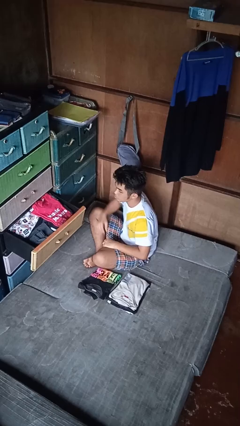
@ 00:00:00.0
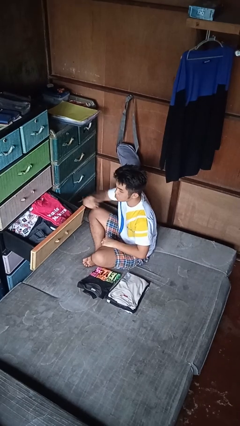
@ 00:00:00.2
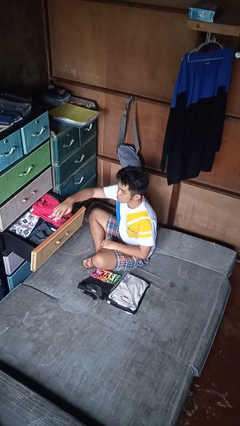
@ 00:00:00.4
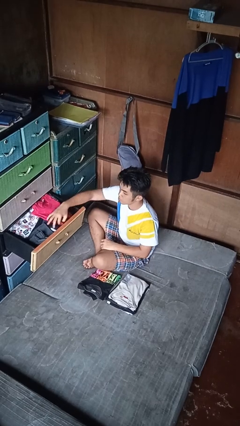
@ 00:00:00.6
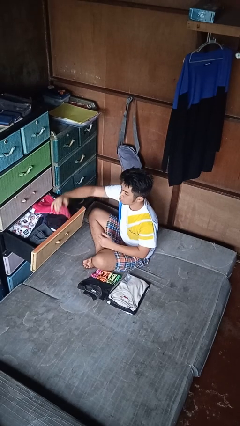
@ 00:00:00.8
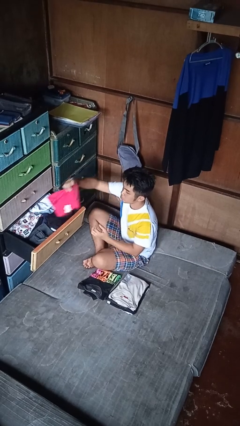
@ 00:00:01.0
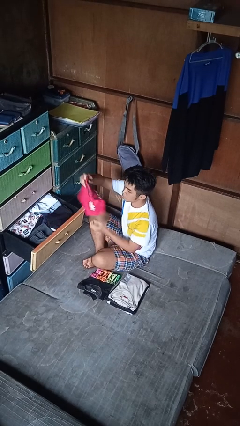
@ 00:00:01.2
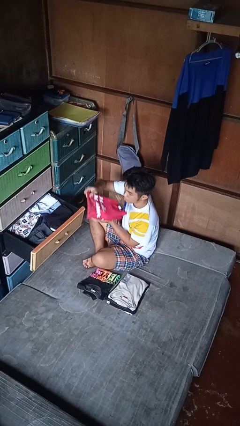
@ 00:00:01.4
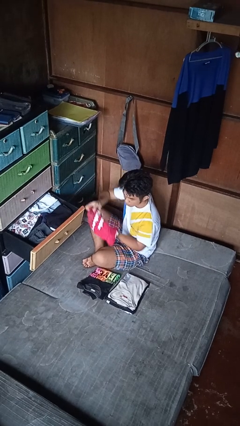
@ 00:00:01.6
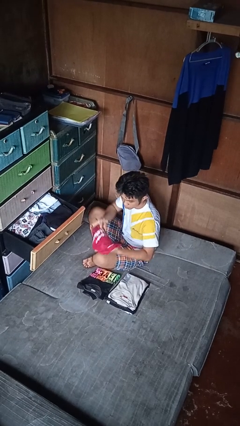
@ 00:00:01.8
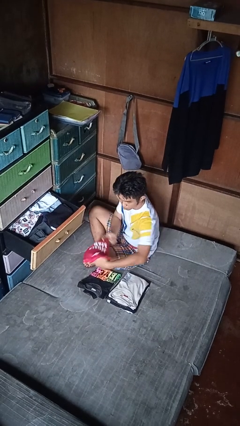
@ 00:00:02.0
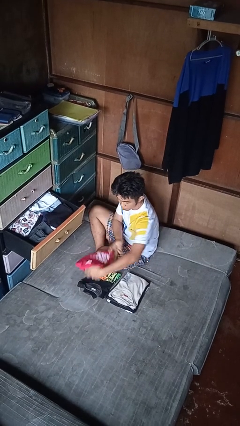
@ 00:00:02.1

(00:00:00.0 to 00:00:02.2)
person takes clothes from dresser

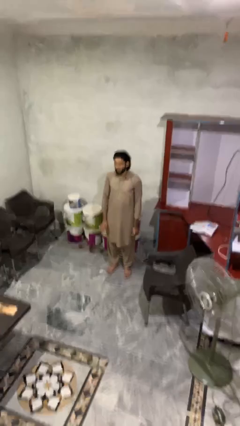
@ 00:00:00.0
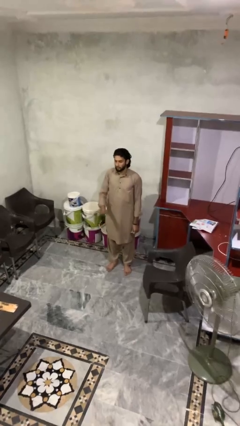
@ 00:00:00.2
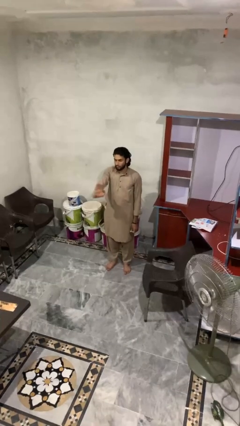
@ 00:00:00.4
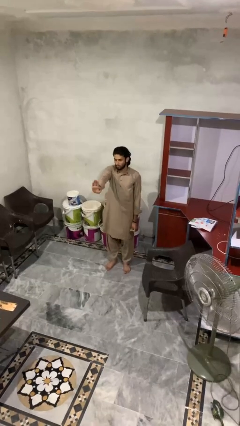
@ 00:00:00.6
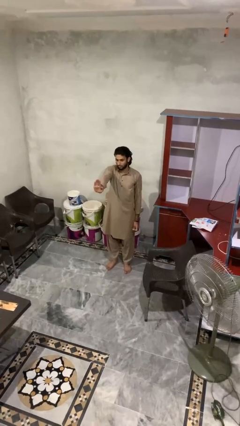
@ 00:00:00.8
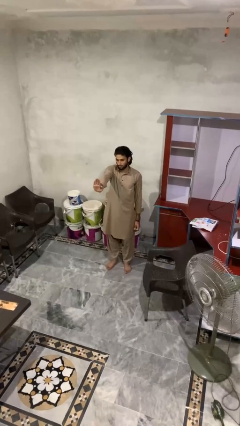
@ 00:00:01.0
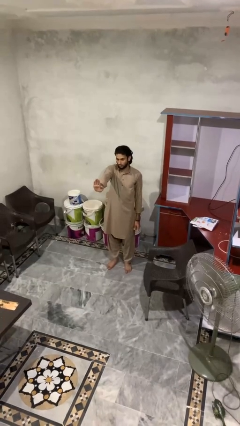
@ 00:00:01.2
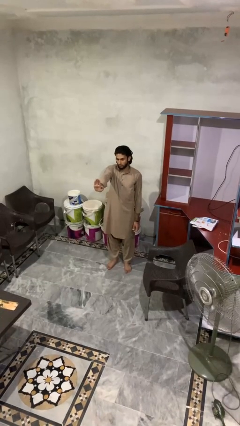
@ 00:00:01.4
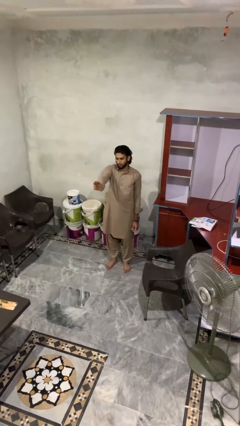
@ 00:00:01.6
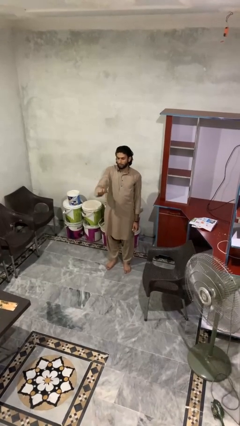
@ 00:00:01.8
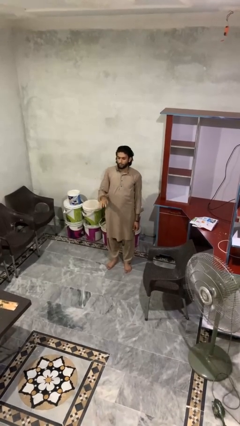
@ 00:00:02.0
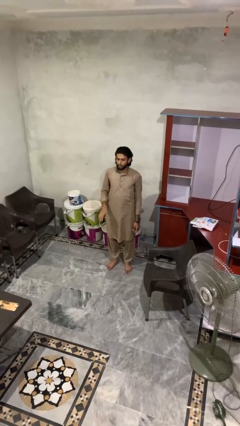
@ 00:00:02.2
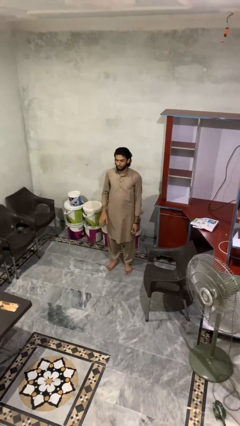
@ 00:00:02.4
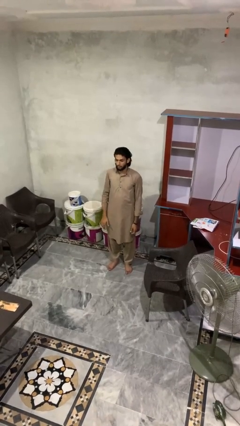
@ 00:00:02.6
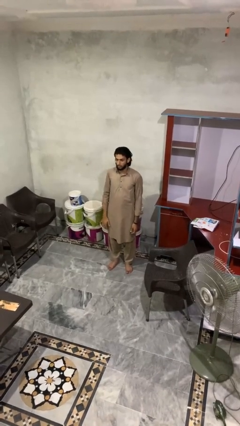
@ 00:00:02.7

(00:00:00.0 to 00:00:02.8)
person gestures stop

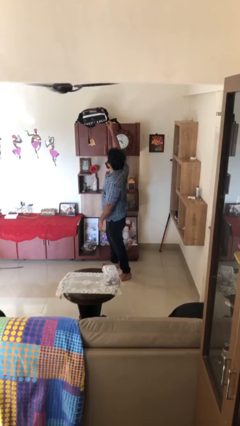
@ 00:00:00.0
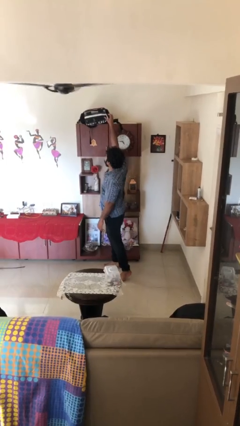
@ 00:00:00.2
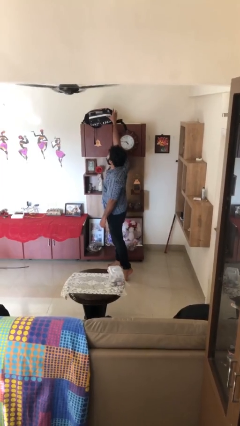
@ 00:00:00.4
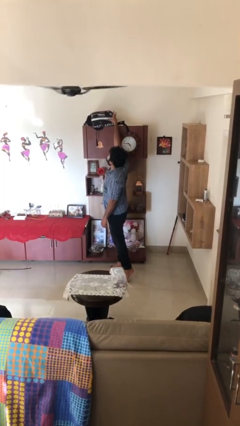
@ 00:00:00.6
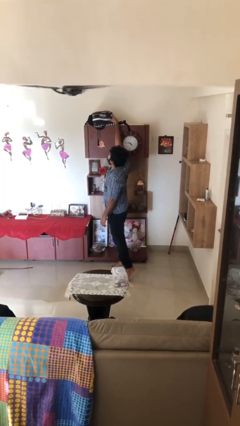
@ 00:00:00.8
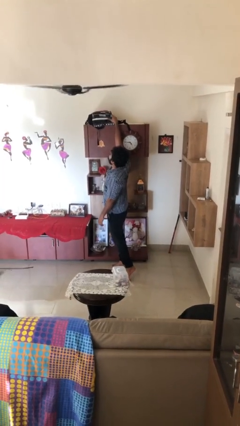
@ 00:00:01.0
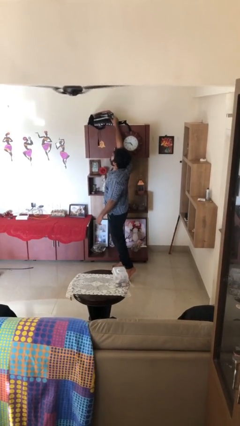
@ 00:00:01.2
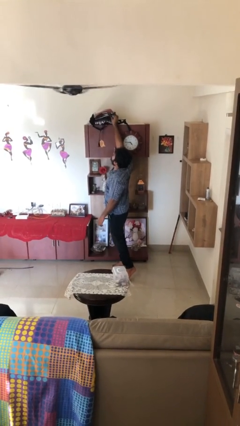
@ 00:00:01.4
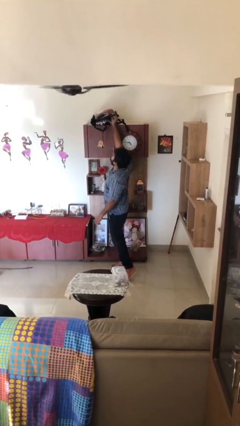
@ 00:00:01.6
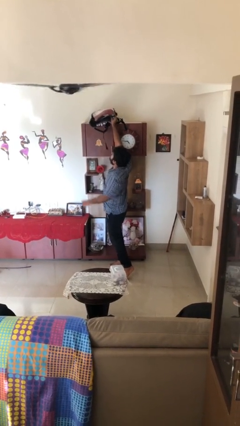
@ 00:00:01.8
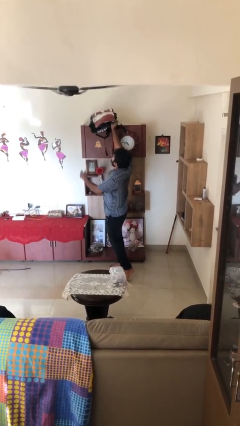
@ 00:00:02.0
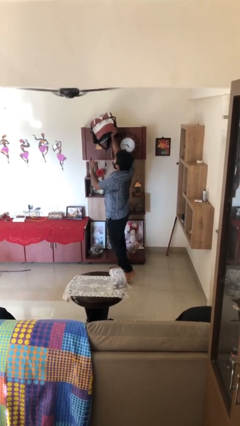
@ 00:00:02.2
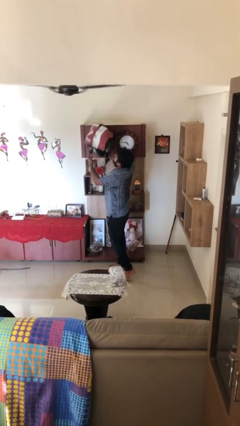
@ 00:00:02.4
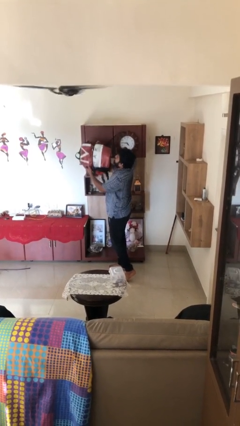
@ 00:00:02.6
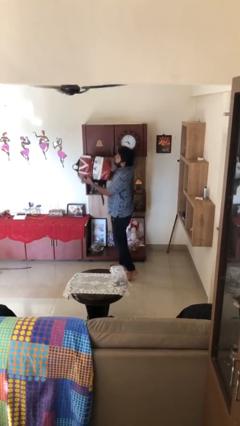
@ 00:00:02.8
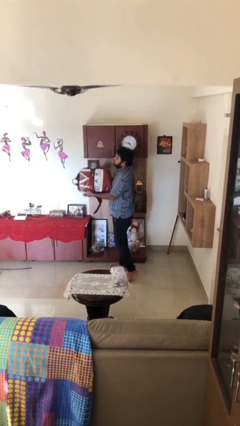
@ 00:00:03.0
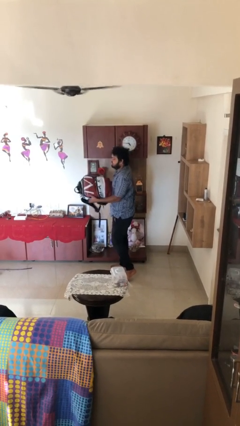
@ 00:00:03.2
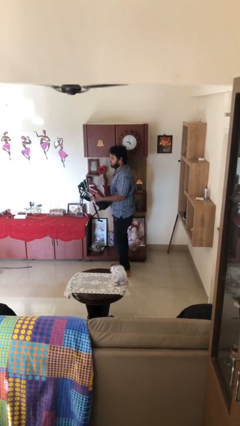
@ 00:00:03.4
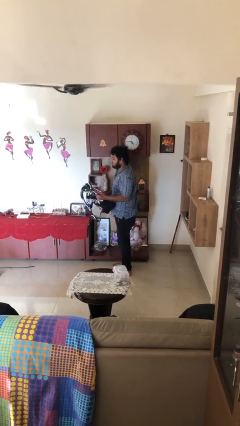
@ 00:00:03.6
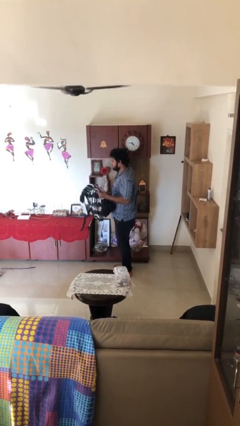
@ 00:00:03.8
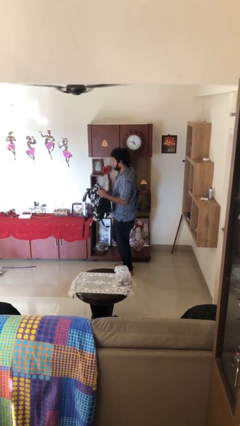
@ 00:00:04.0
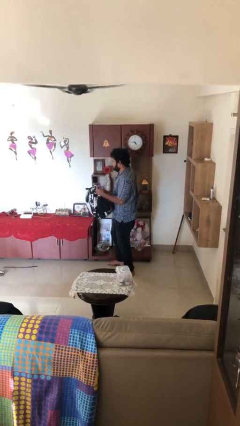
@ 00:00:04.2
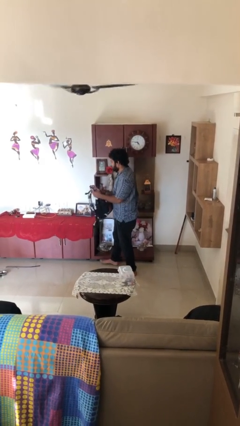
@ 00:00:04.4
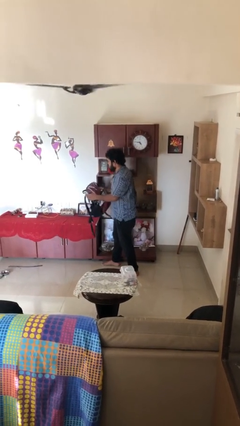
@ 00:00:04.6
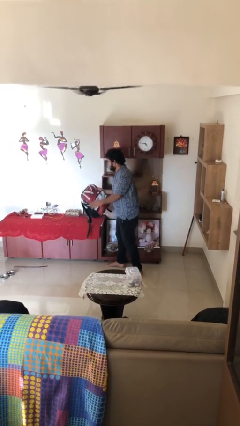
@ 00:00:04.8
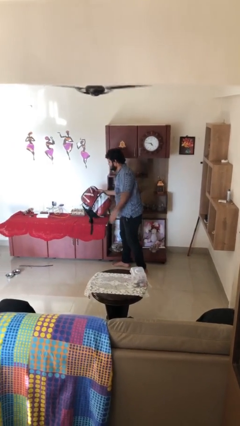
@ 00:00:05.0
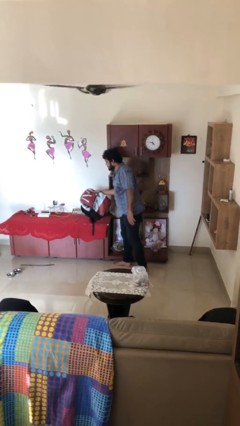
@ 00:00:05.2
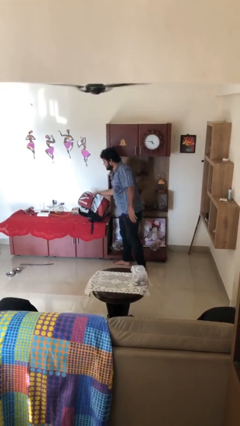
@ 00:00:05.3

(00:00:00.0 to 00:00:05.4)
person picks up object from shelf

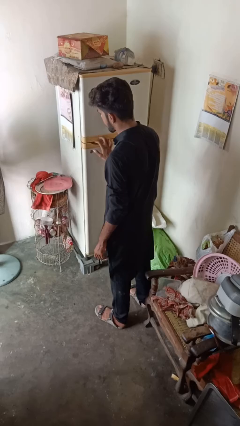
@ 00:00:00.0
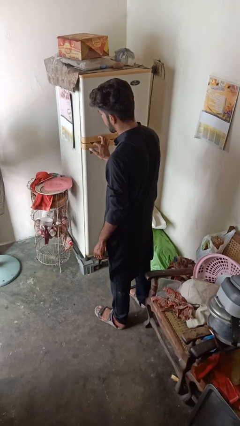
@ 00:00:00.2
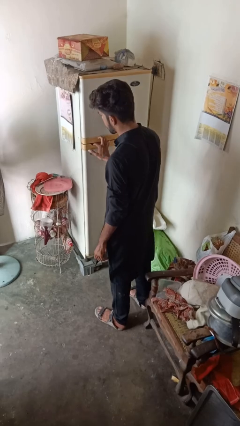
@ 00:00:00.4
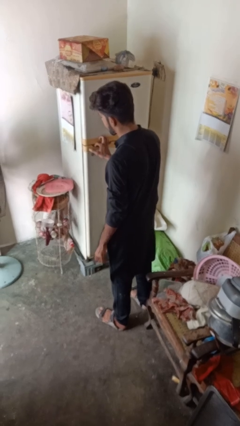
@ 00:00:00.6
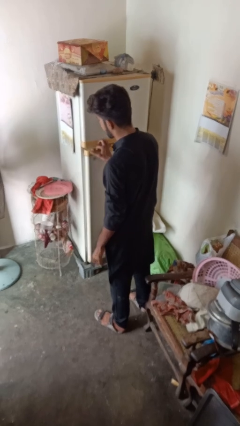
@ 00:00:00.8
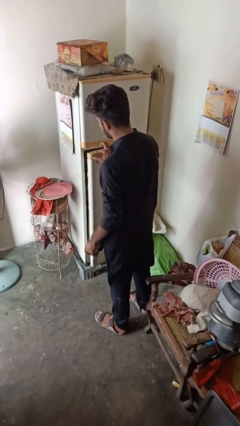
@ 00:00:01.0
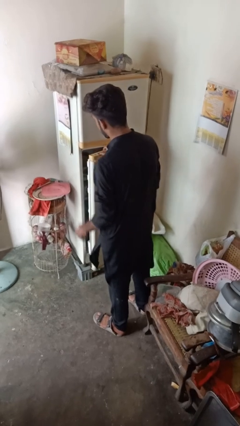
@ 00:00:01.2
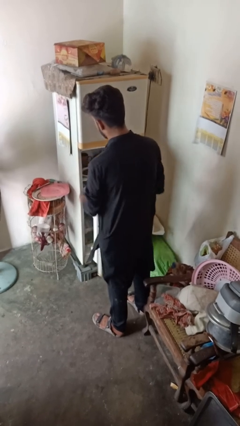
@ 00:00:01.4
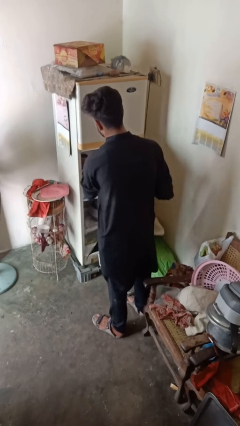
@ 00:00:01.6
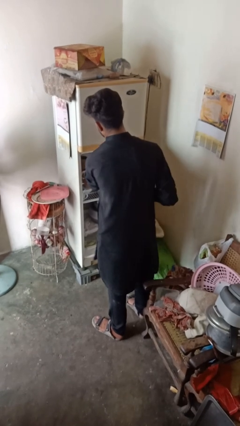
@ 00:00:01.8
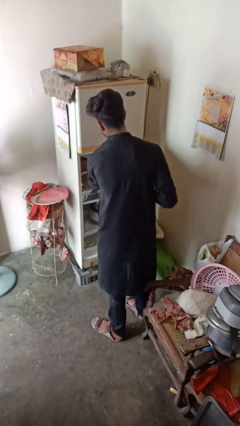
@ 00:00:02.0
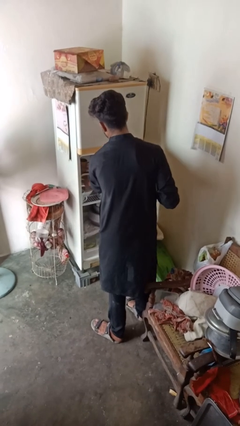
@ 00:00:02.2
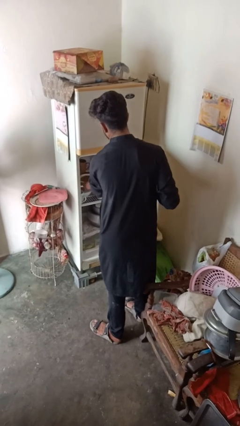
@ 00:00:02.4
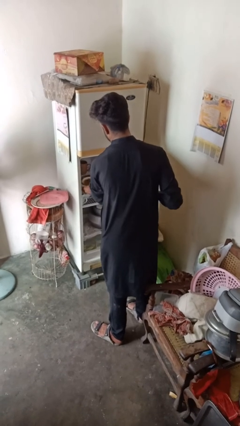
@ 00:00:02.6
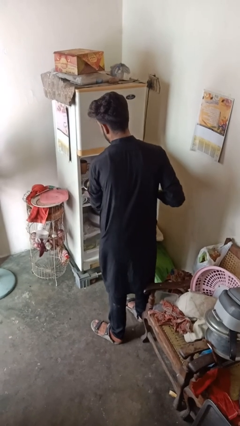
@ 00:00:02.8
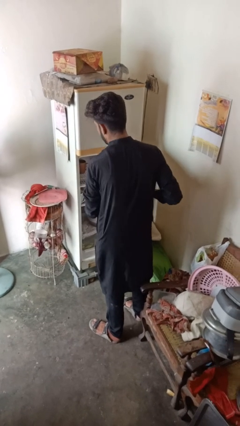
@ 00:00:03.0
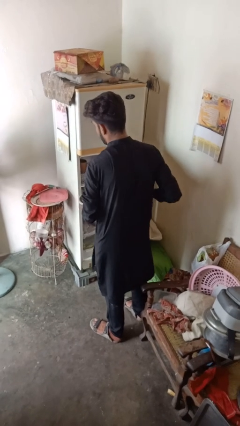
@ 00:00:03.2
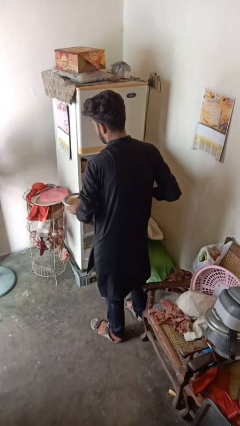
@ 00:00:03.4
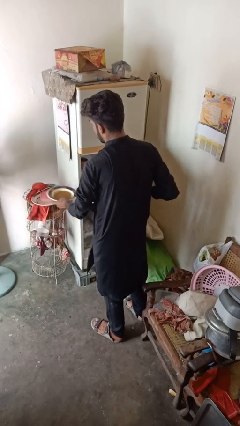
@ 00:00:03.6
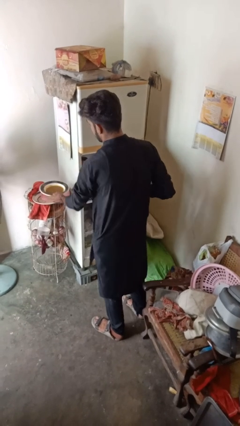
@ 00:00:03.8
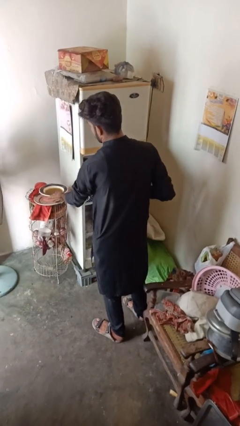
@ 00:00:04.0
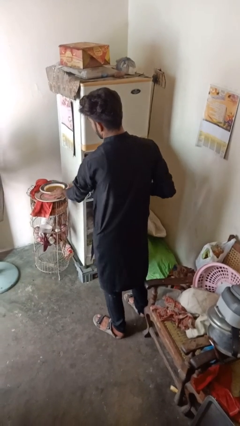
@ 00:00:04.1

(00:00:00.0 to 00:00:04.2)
person takes object from refrigerator

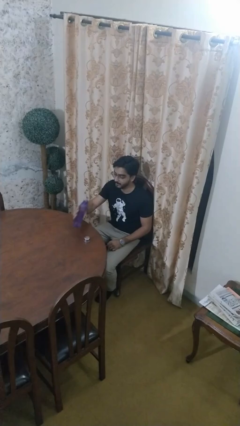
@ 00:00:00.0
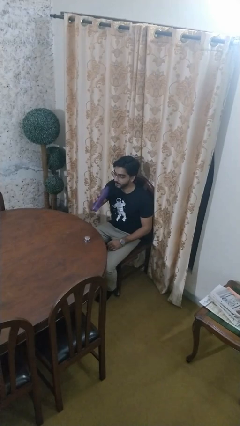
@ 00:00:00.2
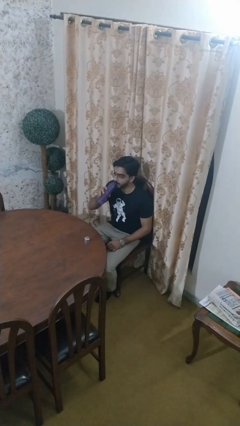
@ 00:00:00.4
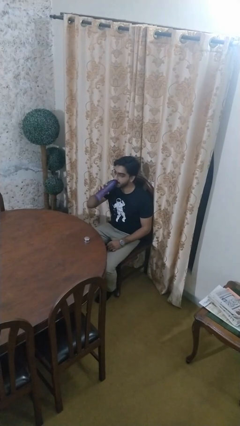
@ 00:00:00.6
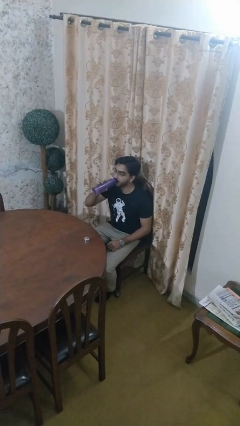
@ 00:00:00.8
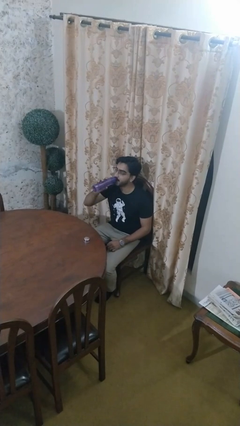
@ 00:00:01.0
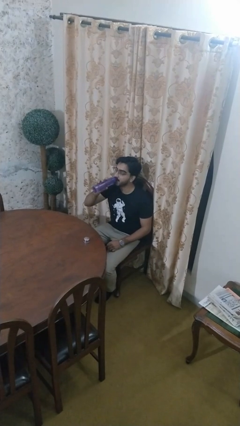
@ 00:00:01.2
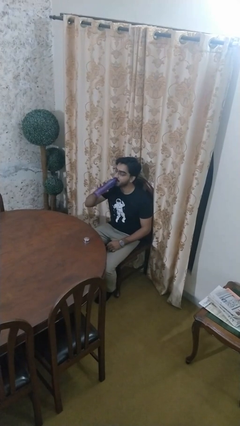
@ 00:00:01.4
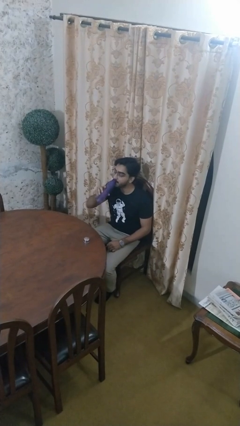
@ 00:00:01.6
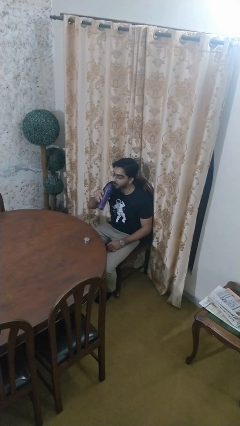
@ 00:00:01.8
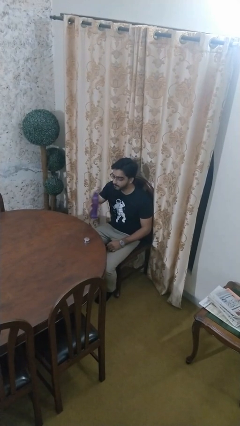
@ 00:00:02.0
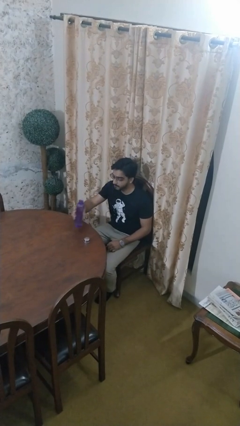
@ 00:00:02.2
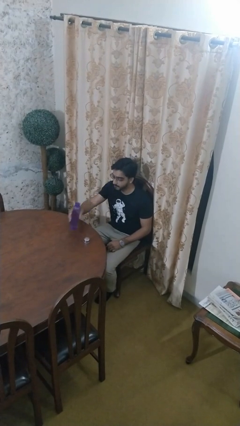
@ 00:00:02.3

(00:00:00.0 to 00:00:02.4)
person drinks from bottle
